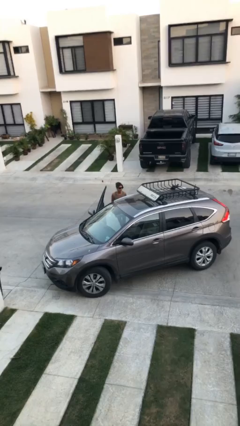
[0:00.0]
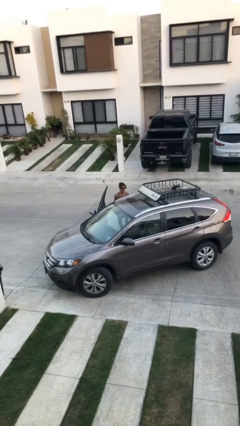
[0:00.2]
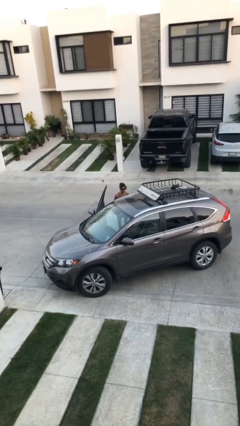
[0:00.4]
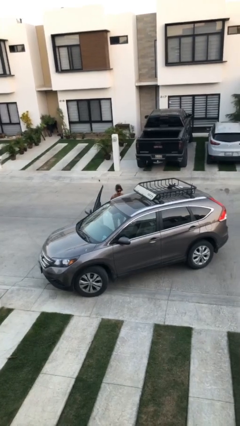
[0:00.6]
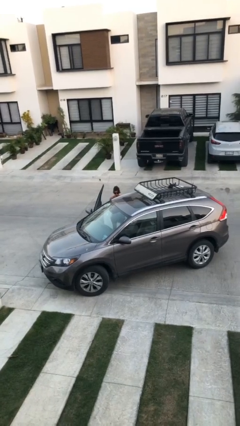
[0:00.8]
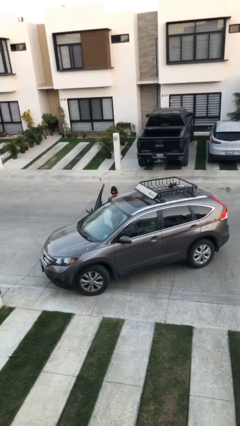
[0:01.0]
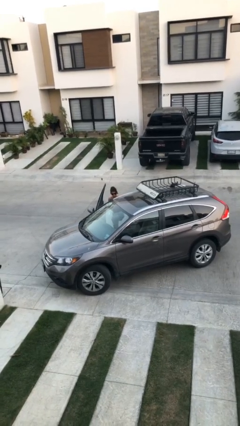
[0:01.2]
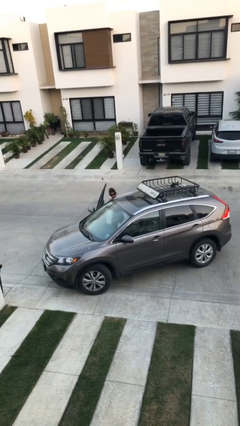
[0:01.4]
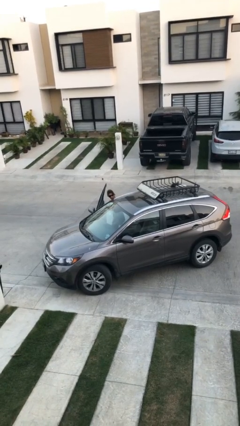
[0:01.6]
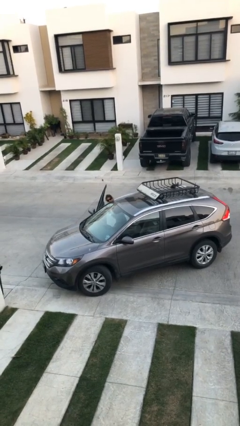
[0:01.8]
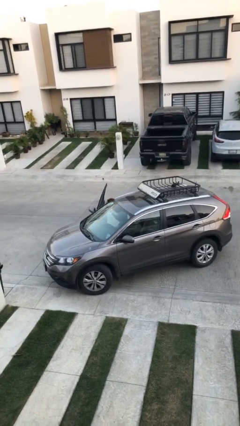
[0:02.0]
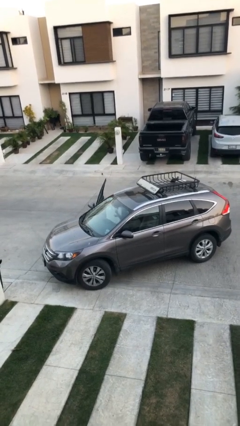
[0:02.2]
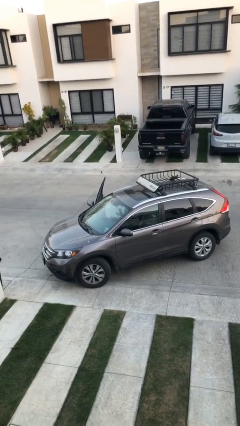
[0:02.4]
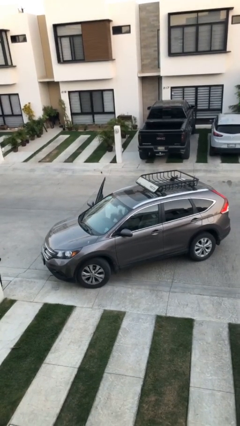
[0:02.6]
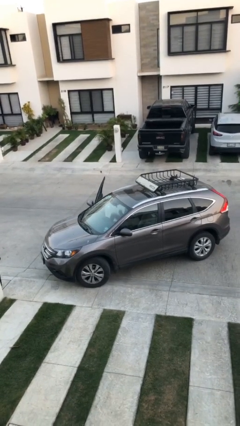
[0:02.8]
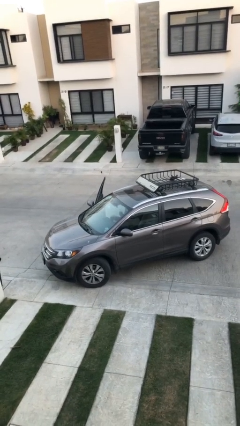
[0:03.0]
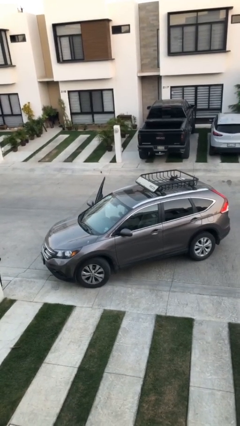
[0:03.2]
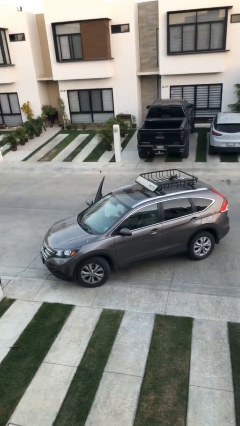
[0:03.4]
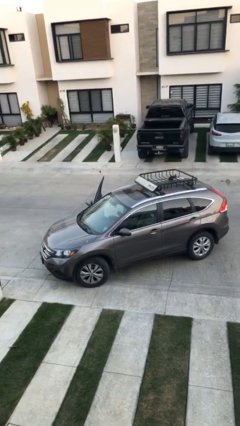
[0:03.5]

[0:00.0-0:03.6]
person enters car

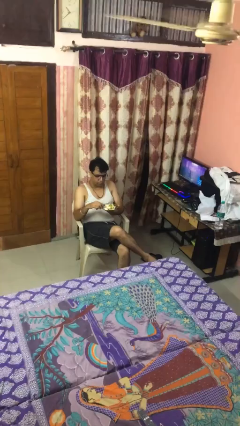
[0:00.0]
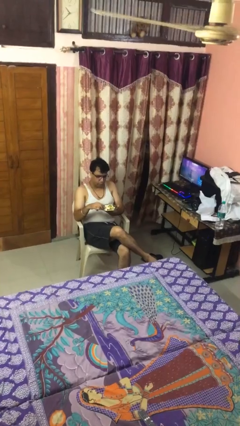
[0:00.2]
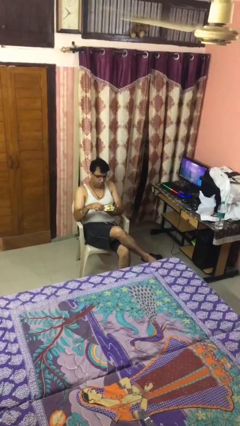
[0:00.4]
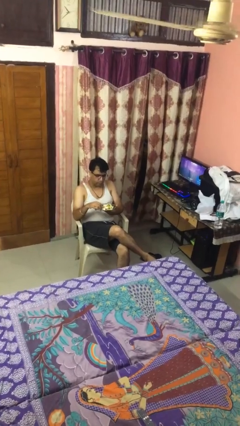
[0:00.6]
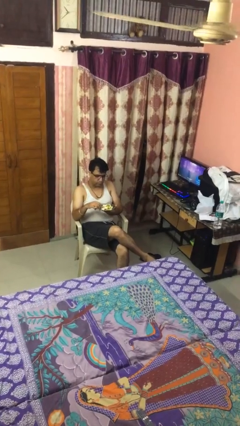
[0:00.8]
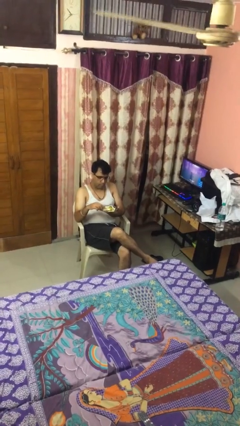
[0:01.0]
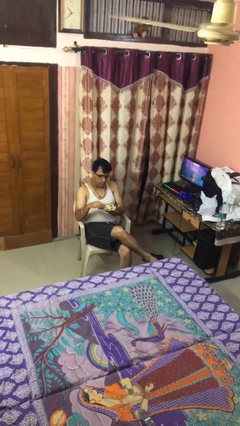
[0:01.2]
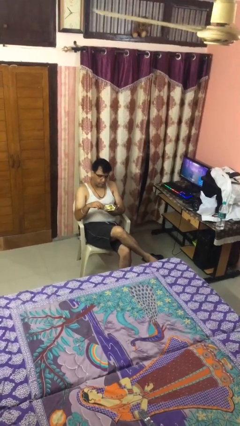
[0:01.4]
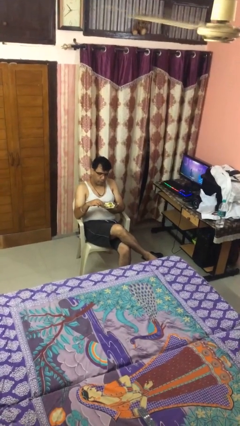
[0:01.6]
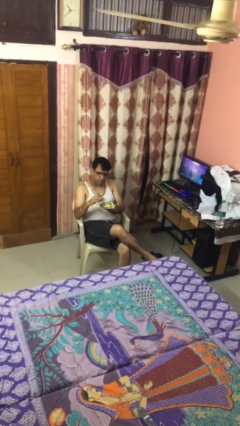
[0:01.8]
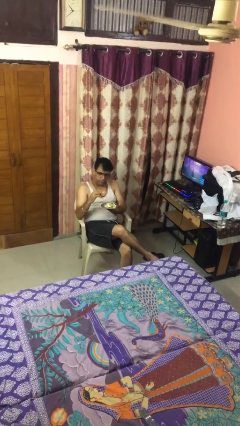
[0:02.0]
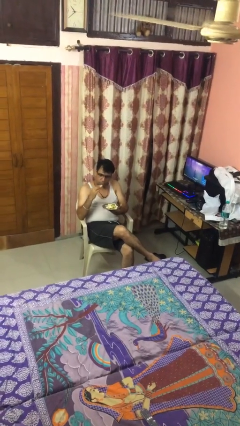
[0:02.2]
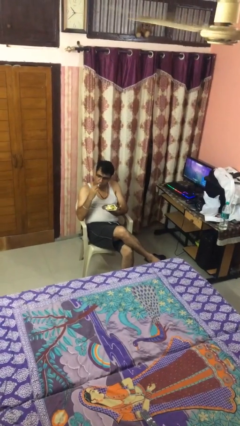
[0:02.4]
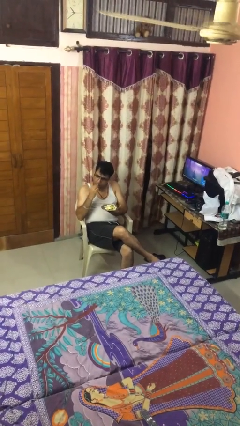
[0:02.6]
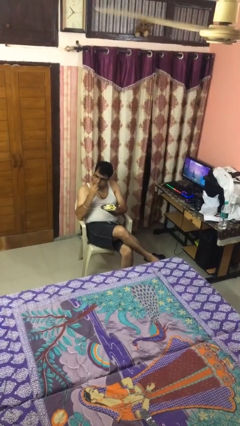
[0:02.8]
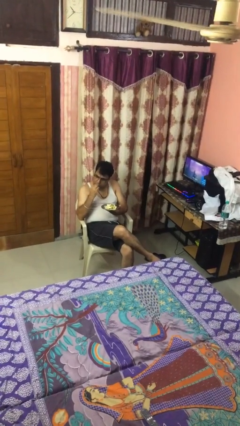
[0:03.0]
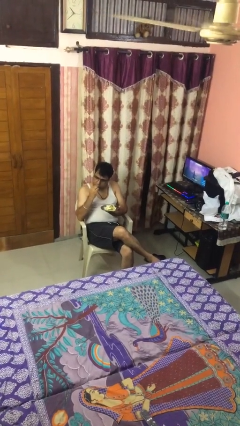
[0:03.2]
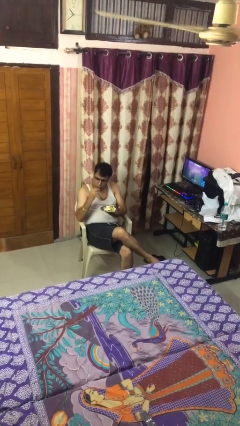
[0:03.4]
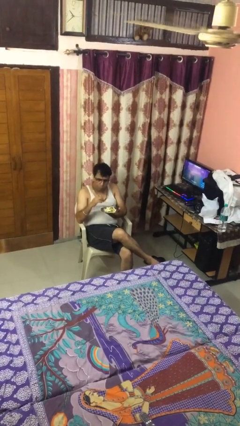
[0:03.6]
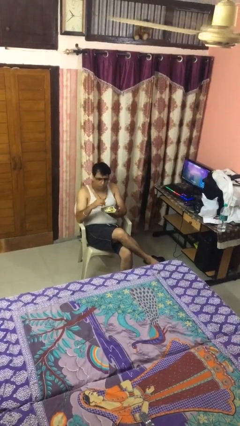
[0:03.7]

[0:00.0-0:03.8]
person eats with hands

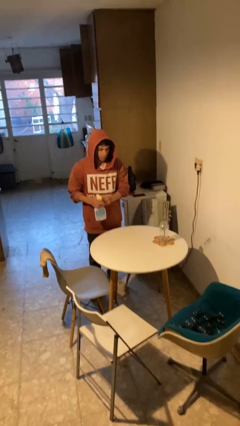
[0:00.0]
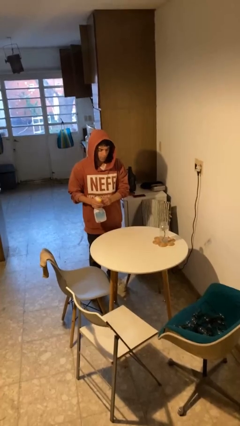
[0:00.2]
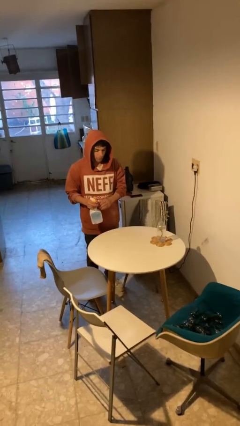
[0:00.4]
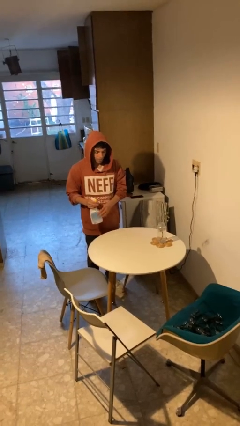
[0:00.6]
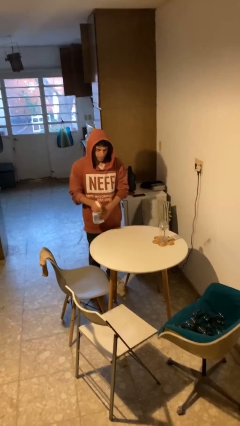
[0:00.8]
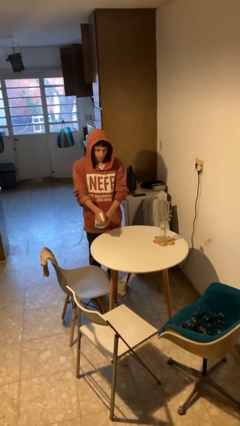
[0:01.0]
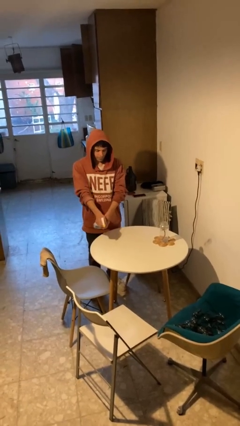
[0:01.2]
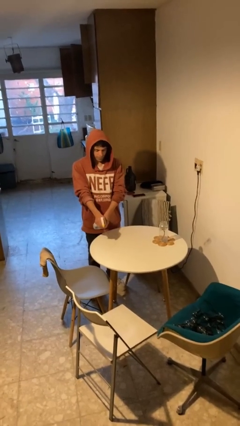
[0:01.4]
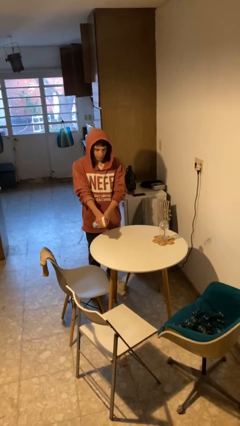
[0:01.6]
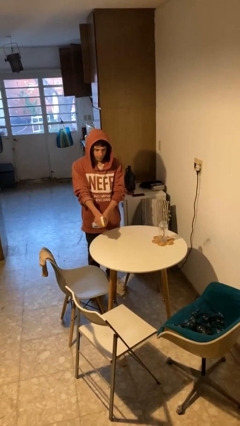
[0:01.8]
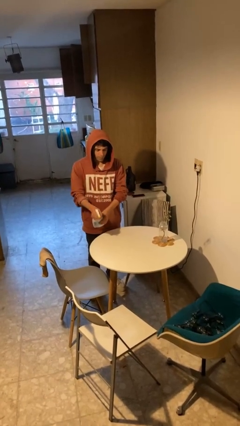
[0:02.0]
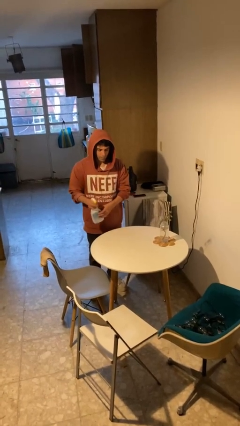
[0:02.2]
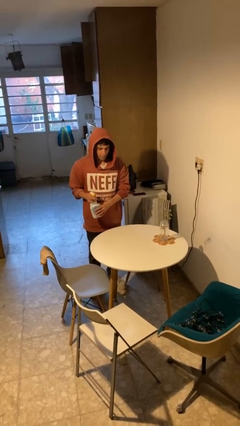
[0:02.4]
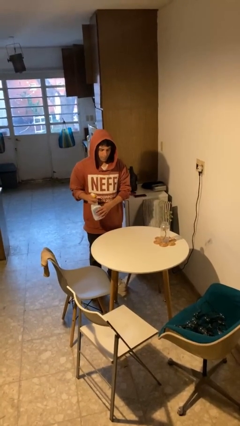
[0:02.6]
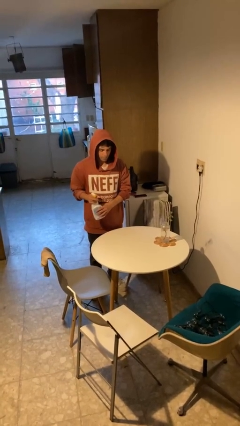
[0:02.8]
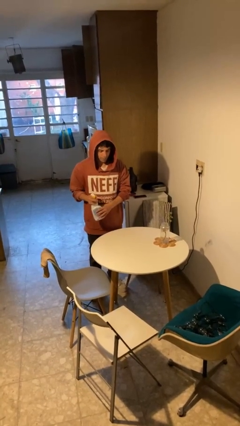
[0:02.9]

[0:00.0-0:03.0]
person sprays from bottle

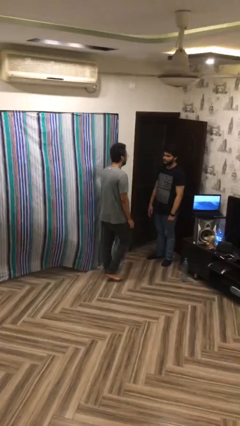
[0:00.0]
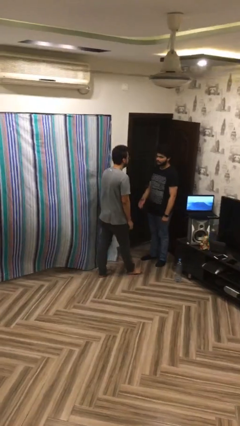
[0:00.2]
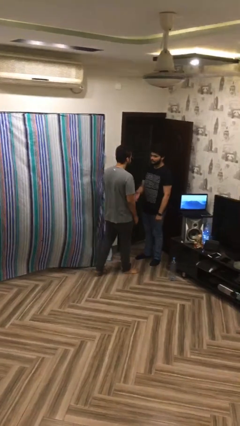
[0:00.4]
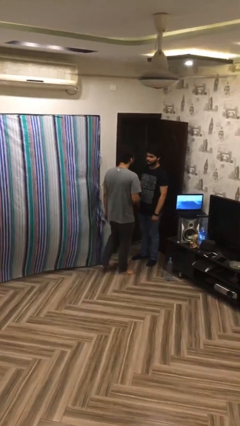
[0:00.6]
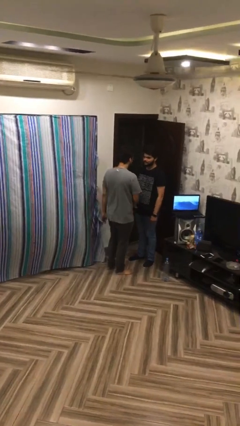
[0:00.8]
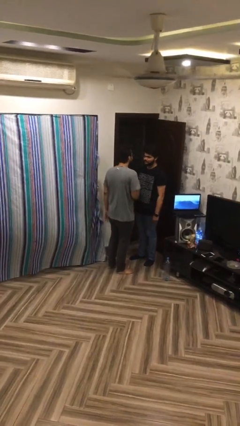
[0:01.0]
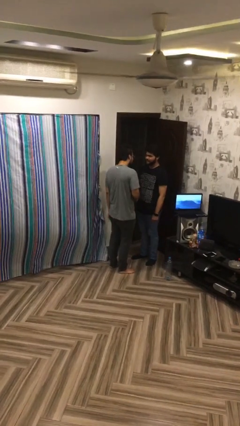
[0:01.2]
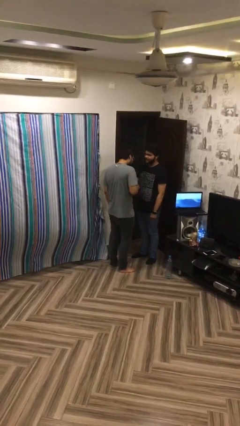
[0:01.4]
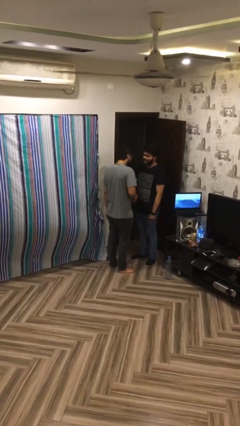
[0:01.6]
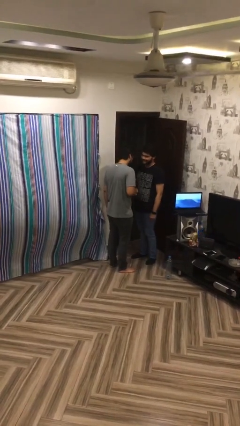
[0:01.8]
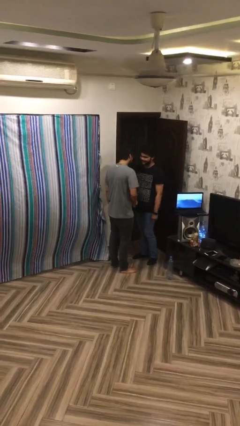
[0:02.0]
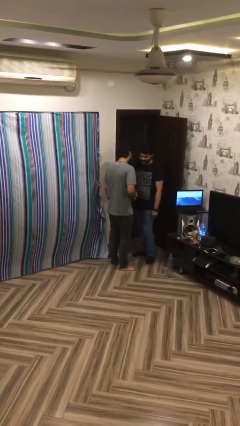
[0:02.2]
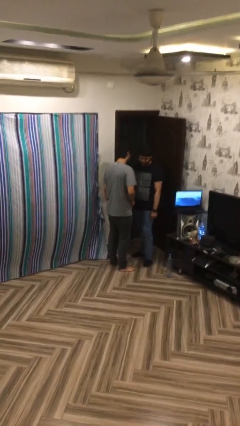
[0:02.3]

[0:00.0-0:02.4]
person shakes hand

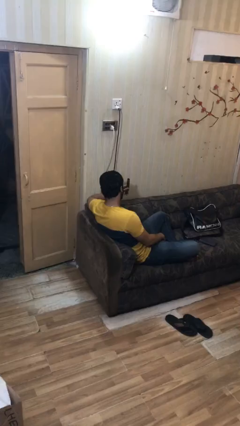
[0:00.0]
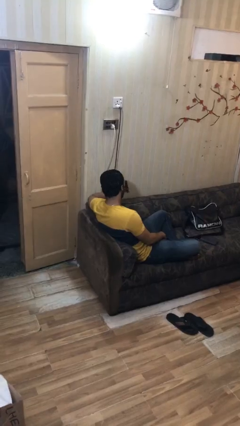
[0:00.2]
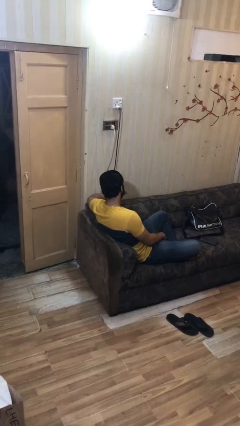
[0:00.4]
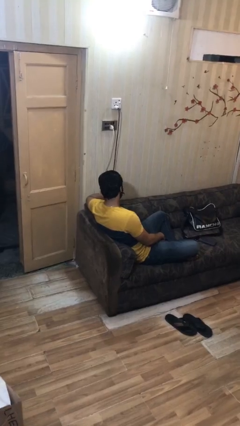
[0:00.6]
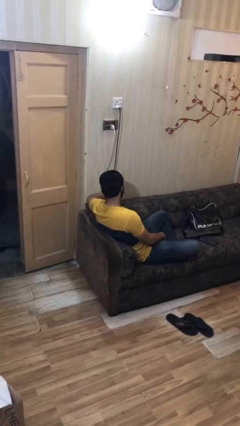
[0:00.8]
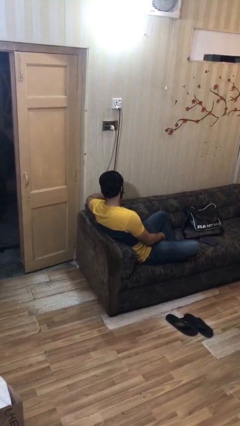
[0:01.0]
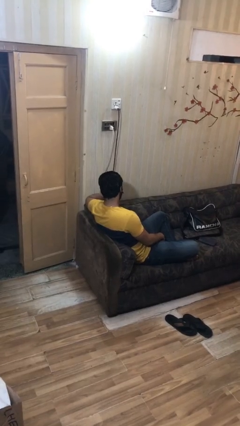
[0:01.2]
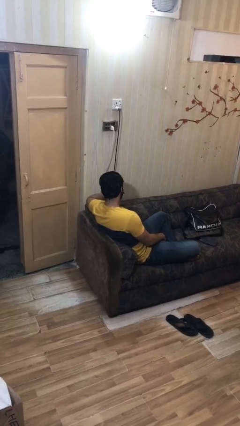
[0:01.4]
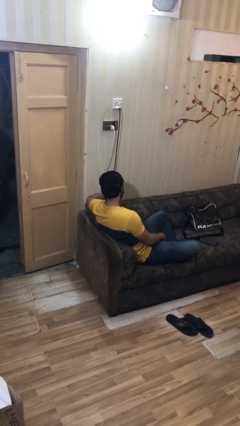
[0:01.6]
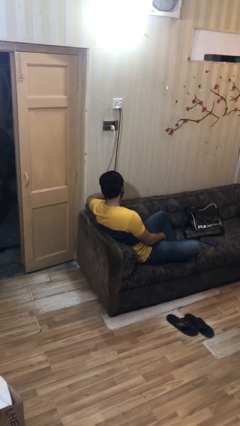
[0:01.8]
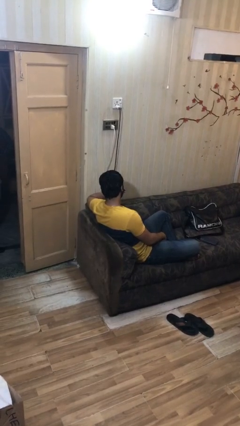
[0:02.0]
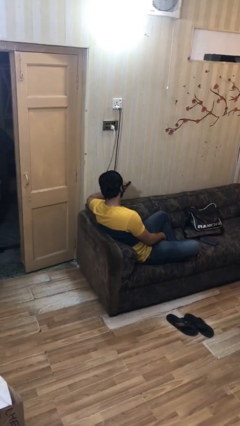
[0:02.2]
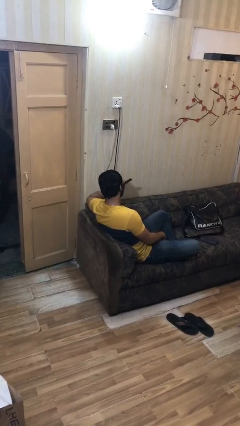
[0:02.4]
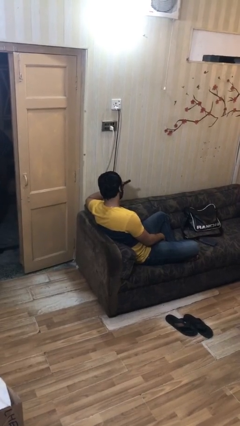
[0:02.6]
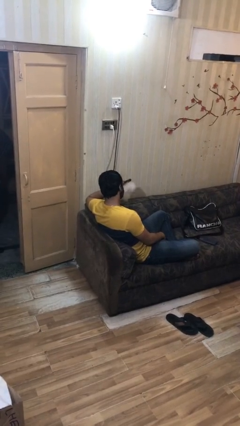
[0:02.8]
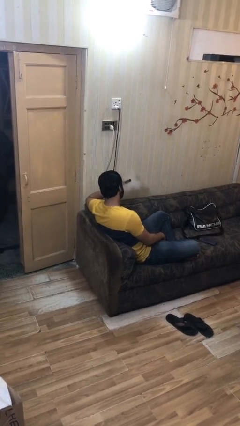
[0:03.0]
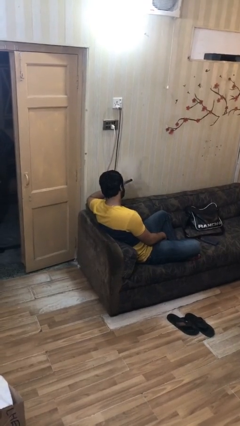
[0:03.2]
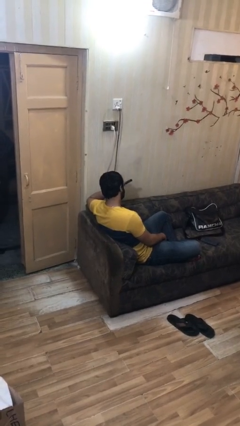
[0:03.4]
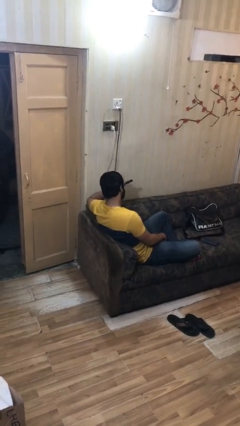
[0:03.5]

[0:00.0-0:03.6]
person vapes

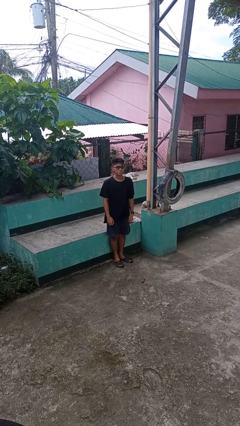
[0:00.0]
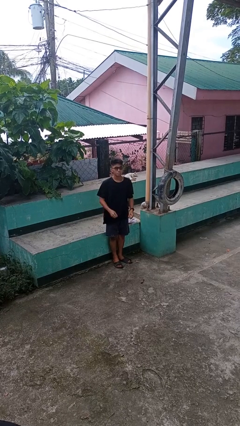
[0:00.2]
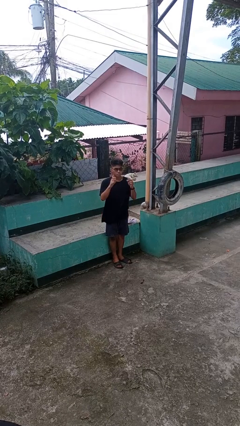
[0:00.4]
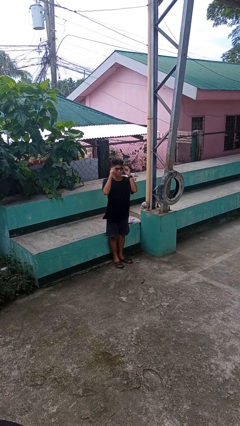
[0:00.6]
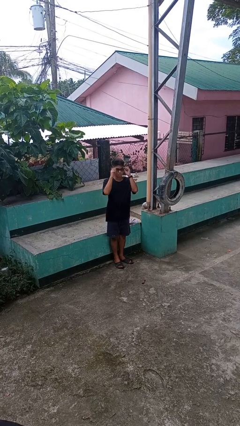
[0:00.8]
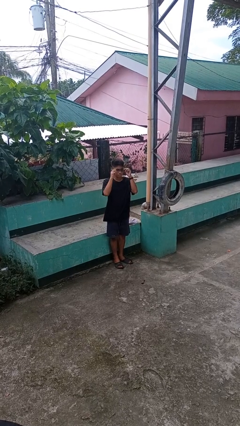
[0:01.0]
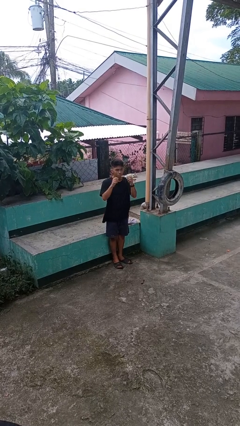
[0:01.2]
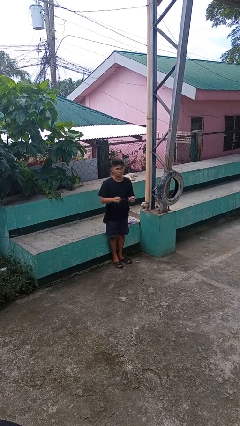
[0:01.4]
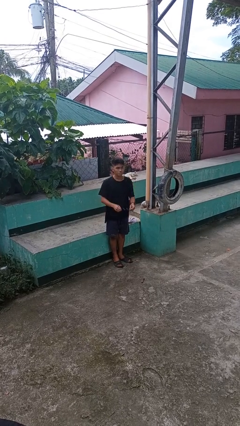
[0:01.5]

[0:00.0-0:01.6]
person takes off glasses
